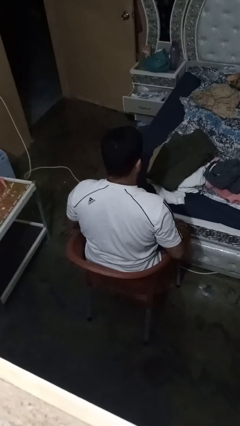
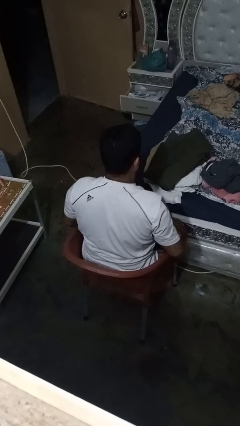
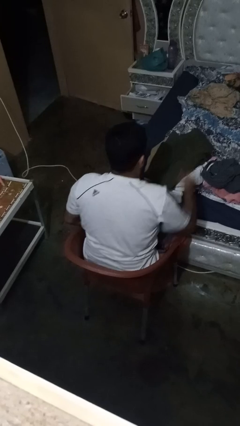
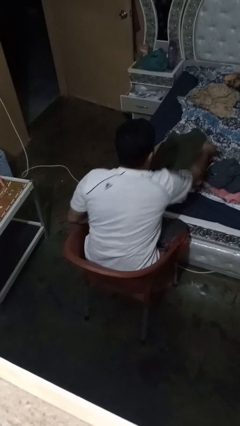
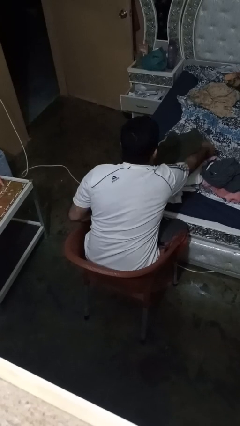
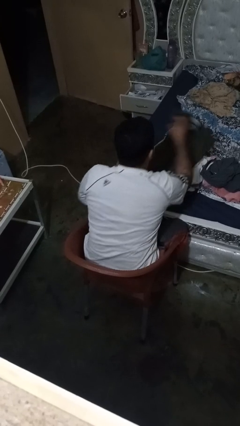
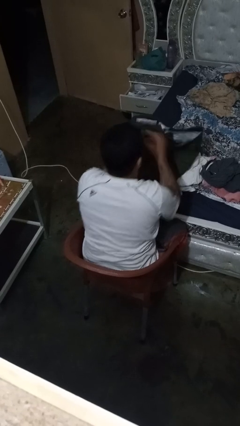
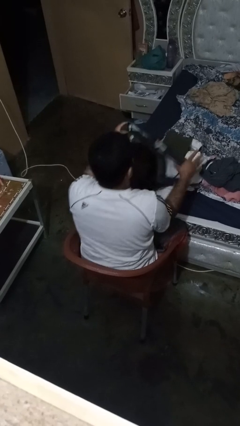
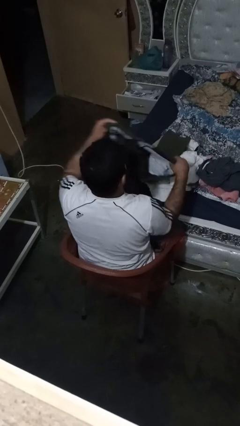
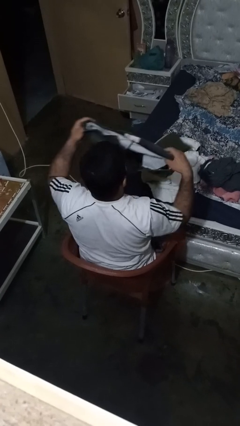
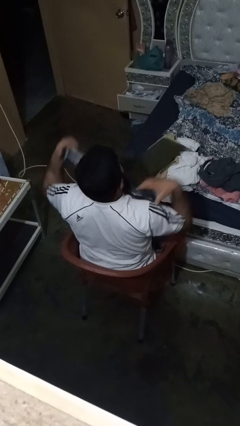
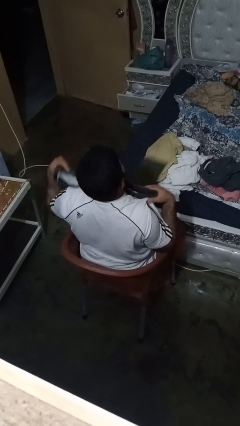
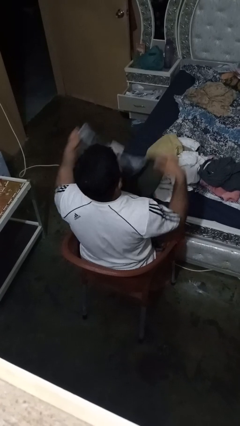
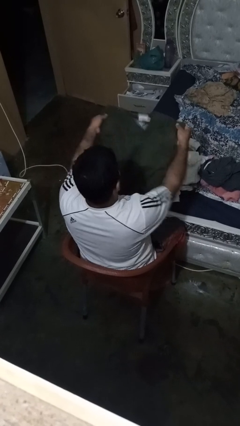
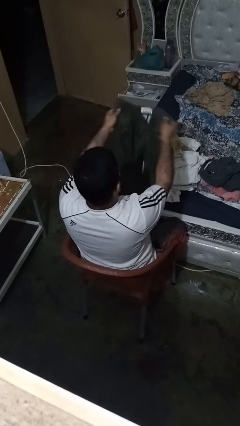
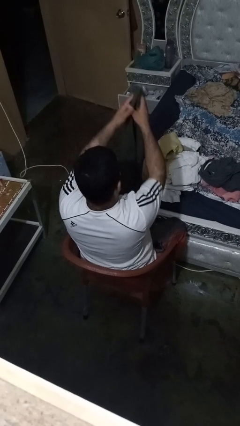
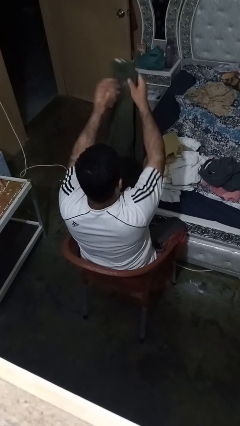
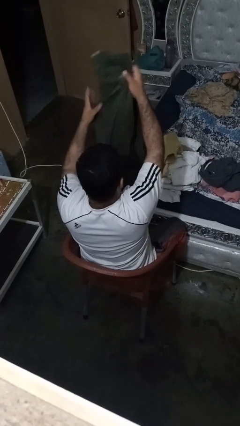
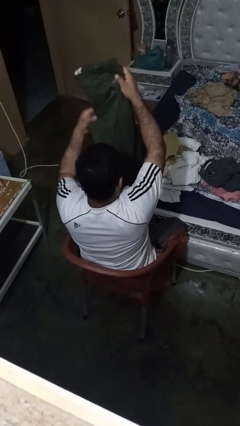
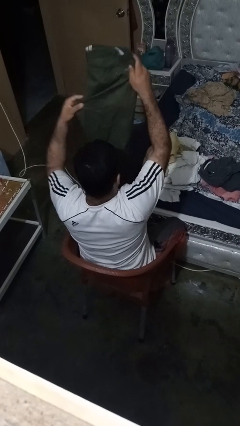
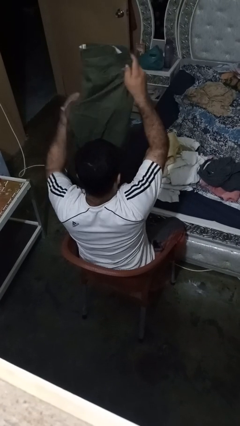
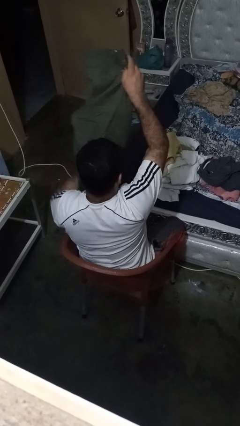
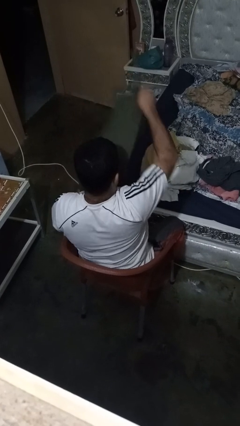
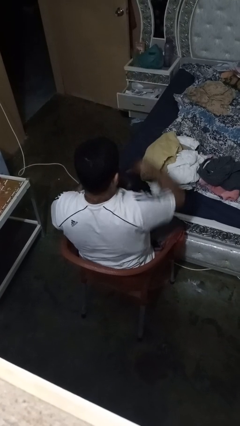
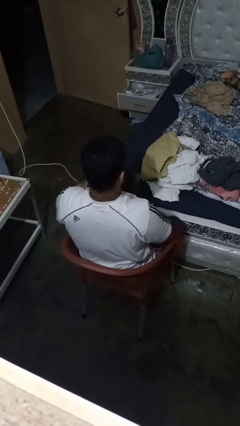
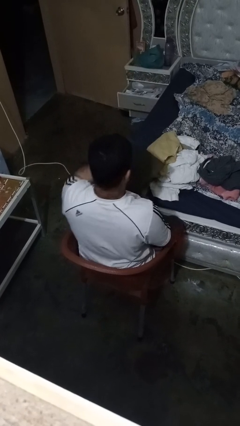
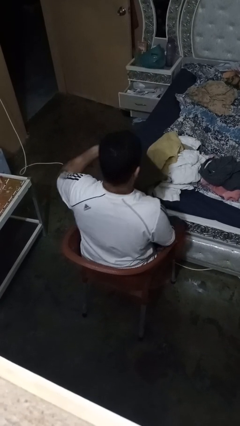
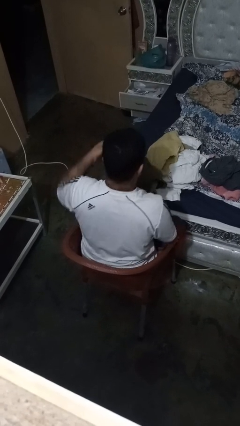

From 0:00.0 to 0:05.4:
person folds pants

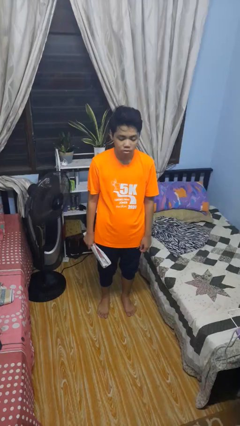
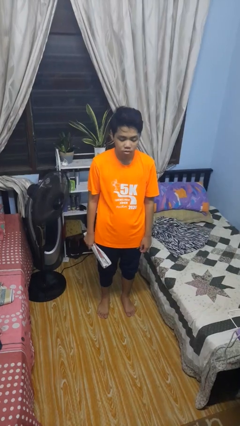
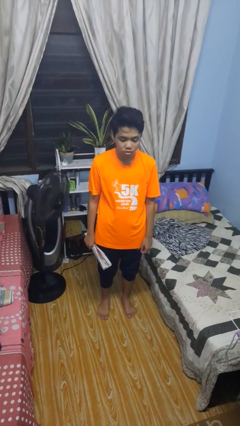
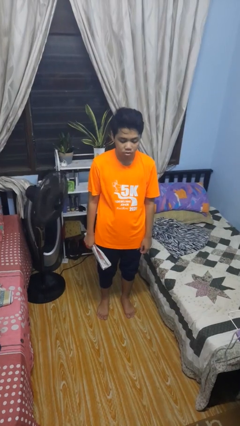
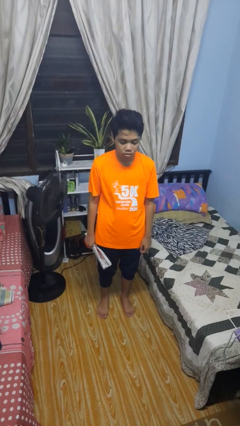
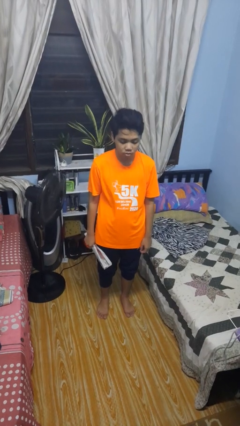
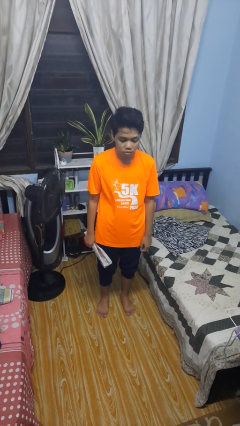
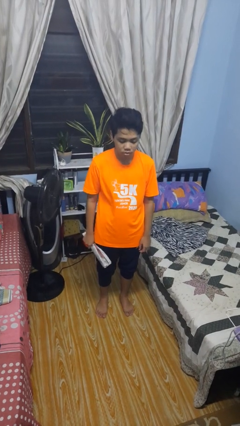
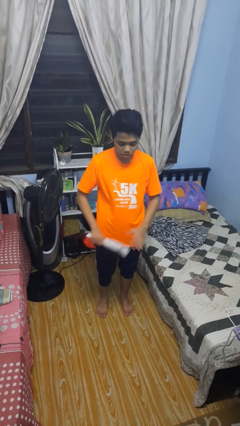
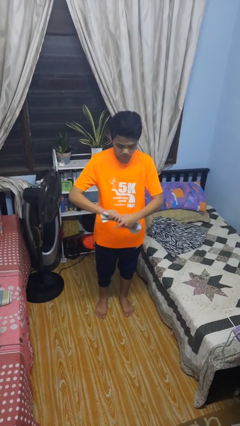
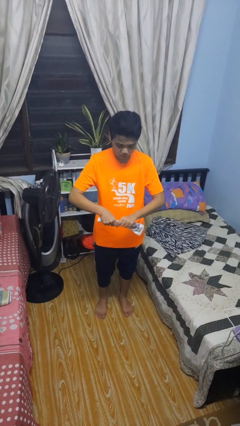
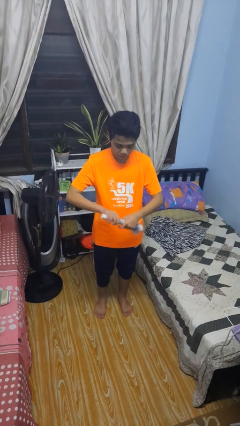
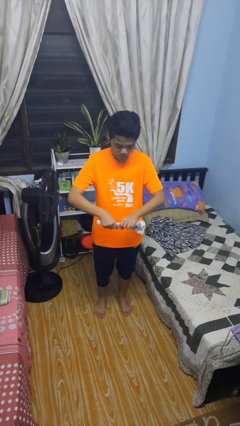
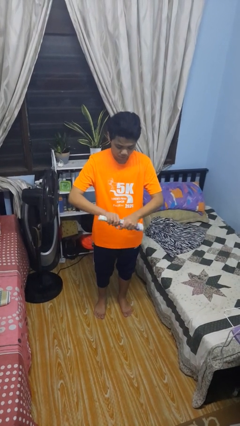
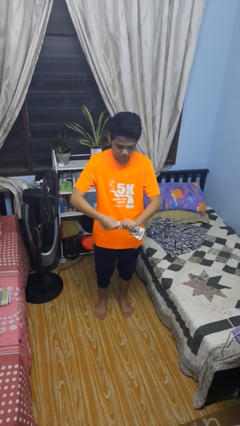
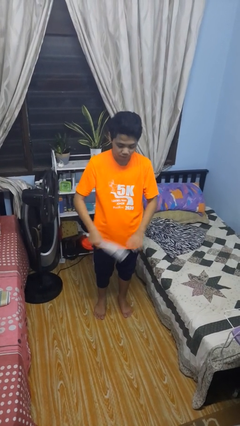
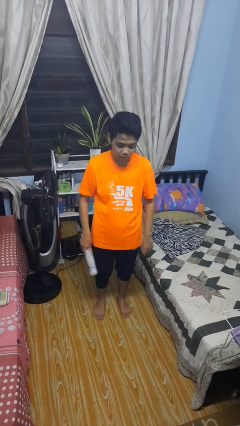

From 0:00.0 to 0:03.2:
person squeezes object

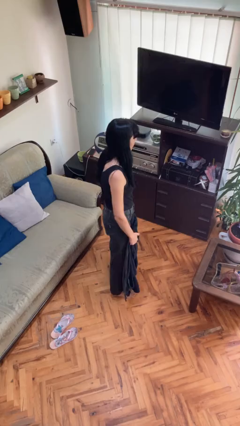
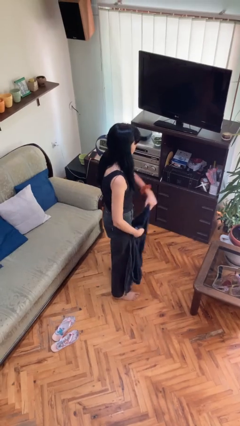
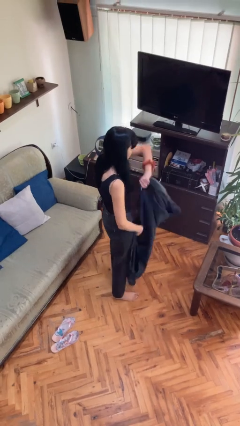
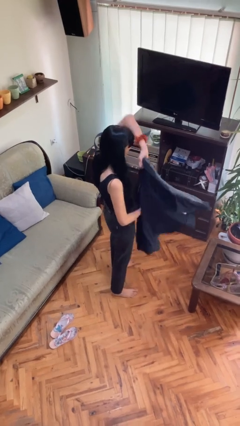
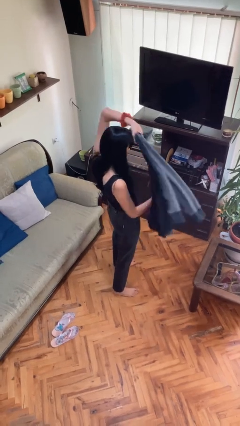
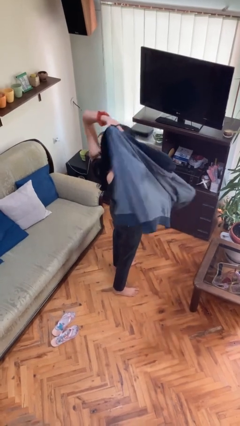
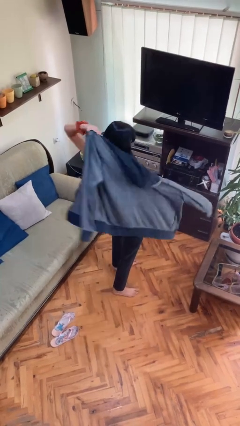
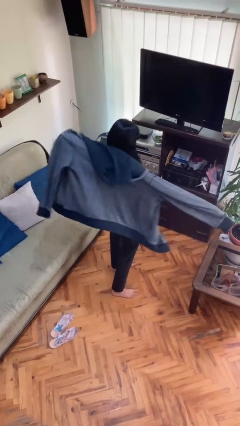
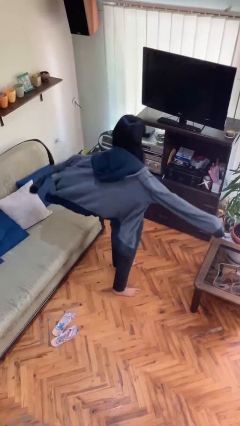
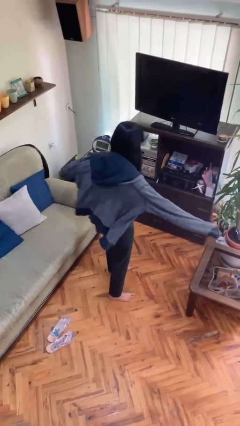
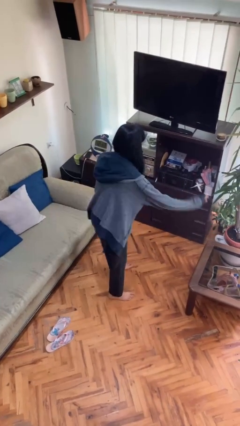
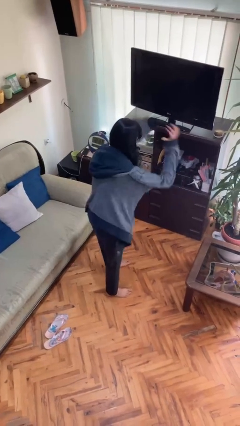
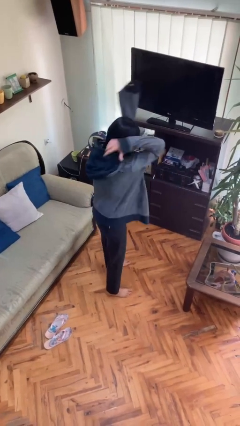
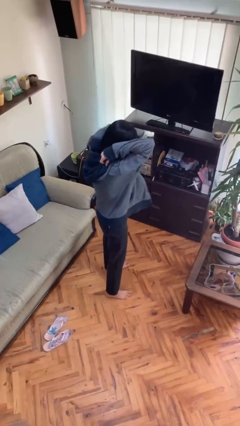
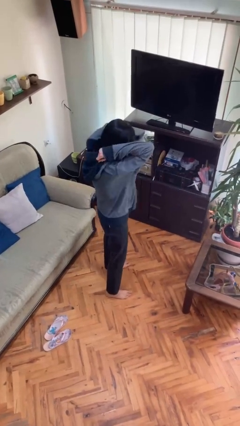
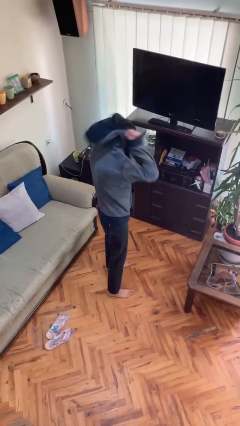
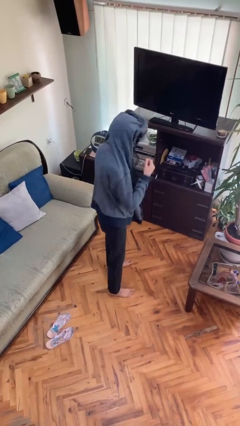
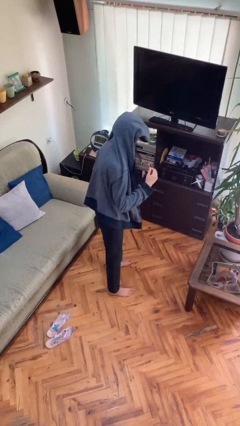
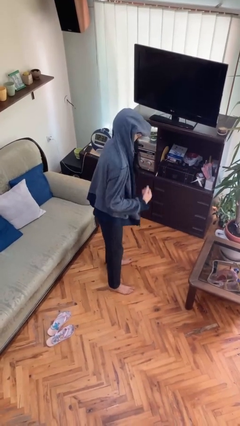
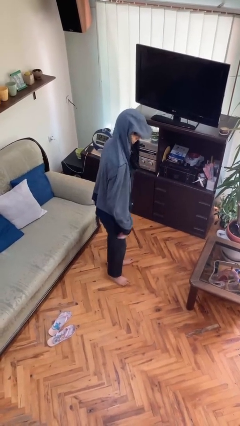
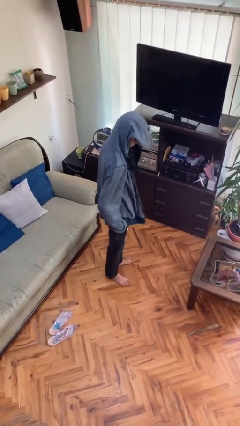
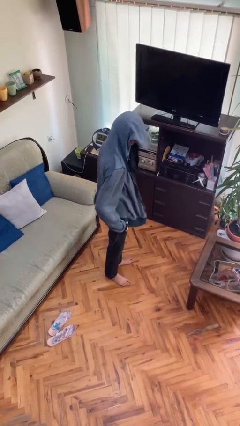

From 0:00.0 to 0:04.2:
person puts on hoodie

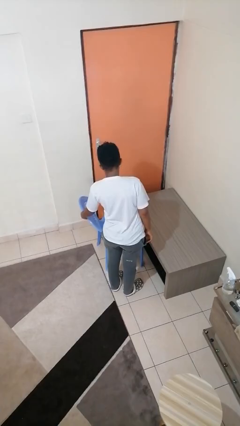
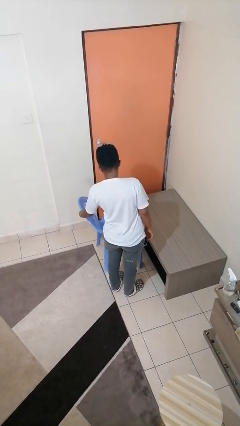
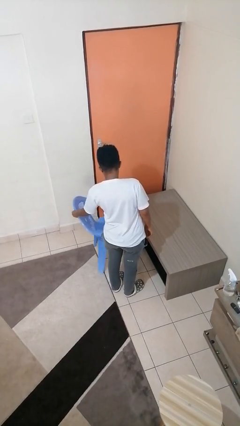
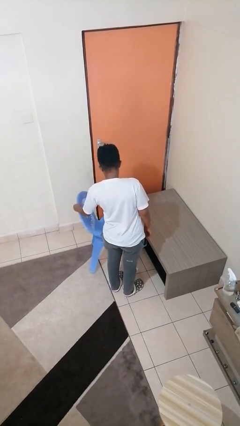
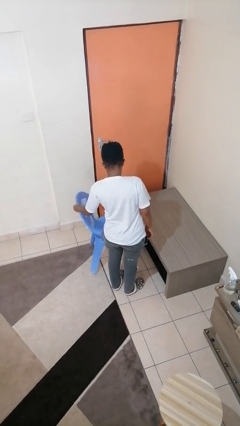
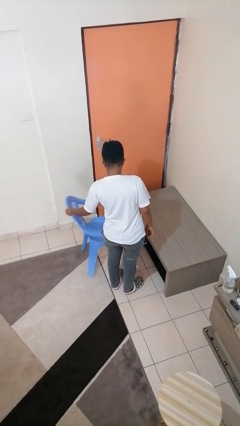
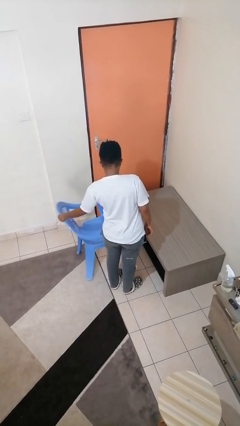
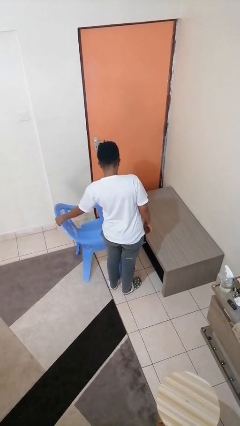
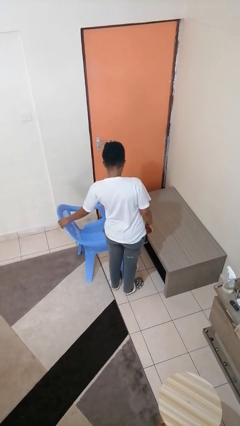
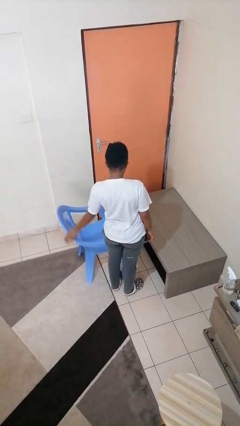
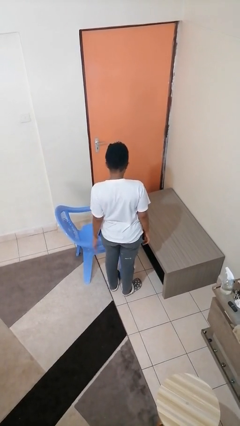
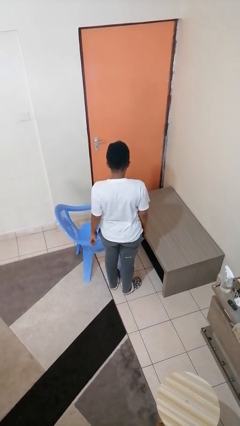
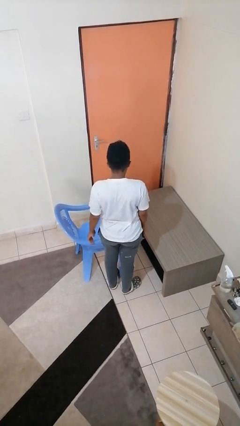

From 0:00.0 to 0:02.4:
person pulls out chair

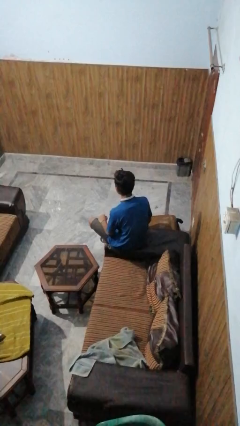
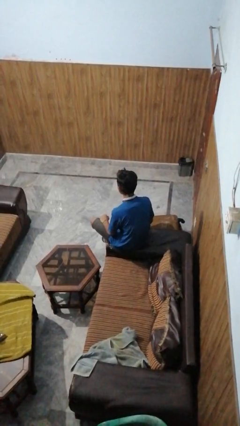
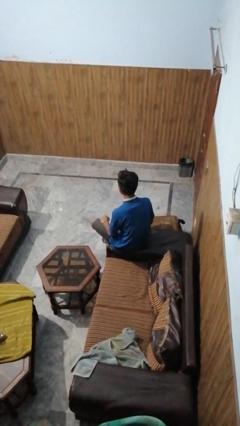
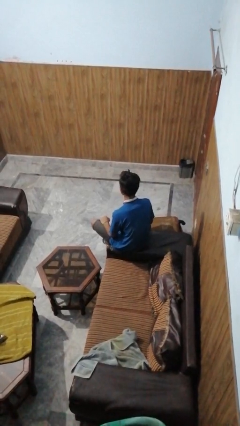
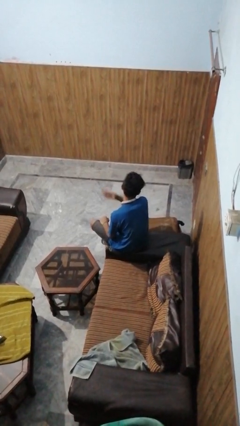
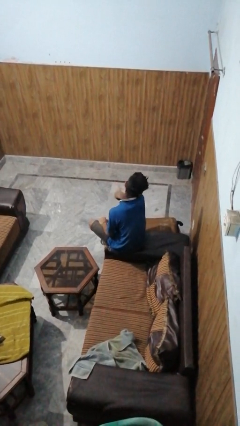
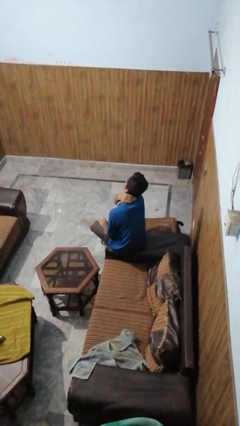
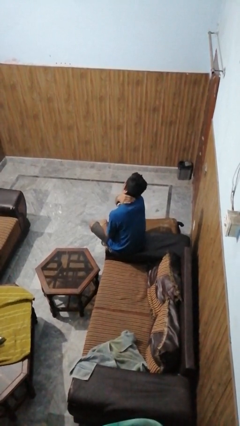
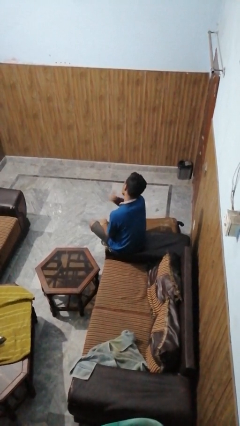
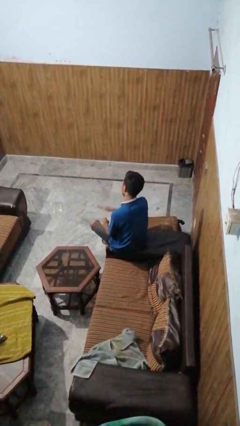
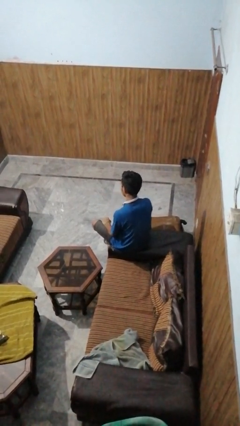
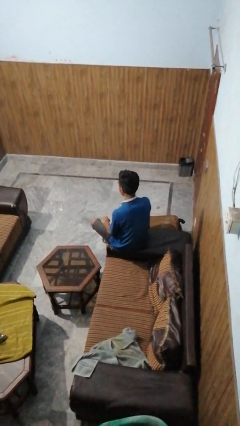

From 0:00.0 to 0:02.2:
person swats bug

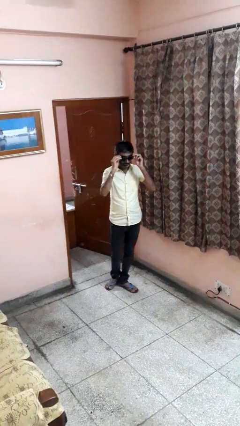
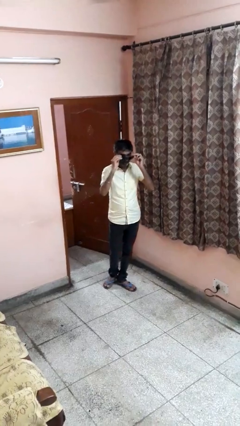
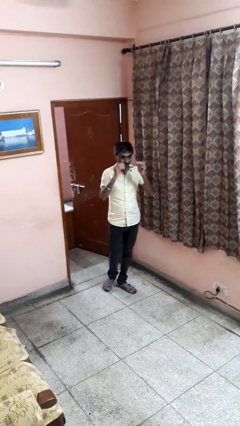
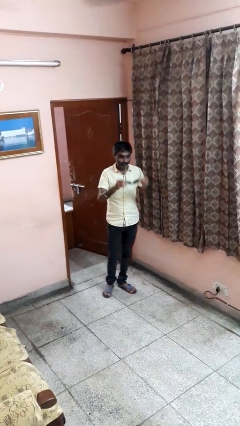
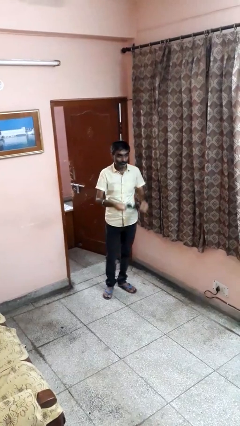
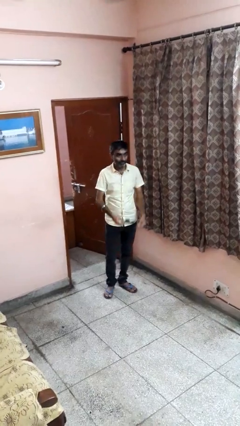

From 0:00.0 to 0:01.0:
person takes off sunglasses
